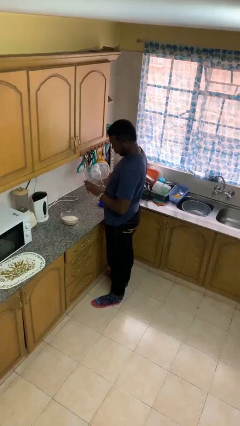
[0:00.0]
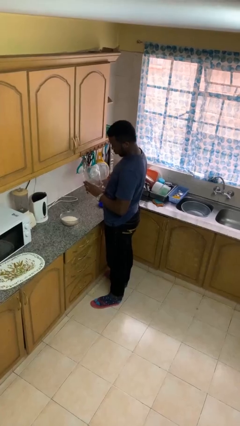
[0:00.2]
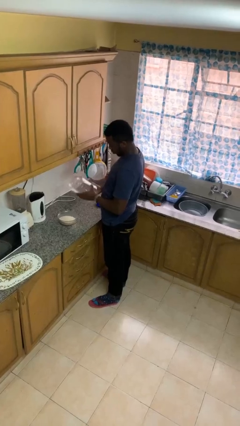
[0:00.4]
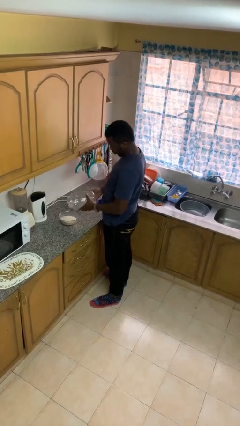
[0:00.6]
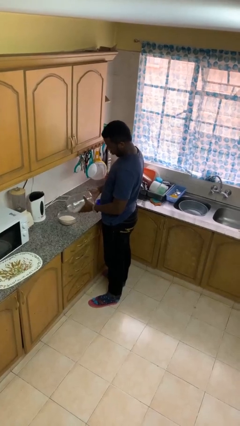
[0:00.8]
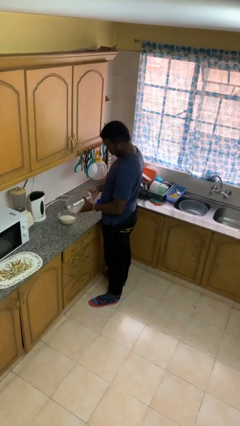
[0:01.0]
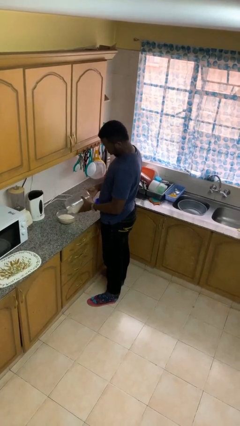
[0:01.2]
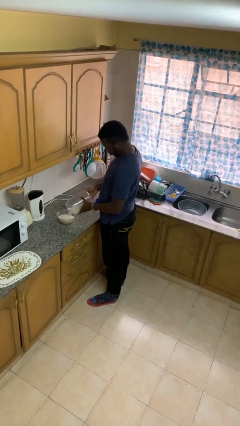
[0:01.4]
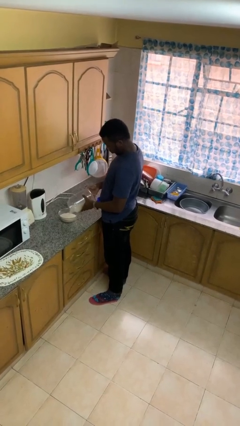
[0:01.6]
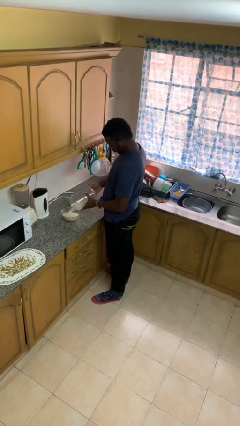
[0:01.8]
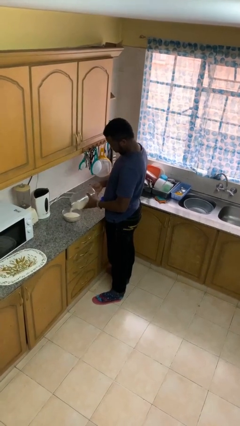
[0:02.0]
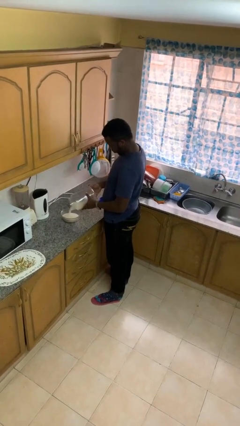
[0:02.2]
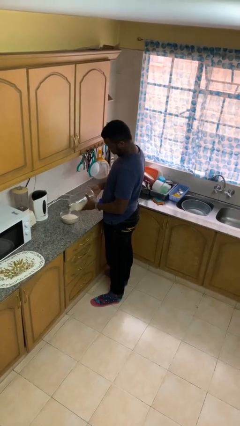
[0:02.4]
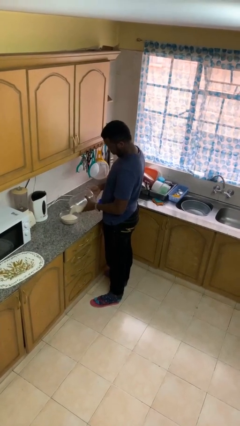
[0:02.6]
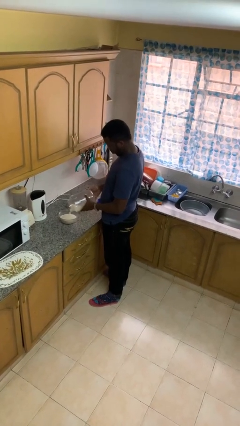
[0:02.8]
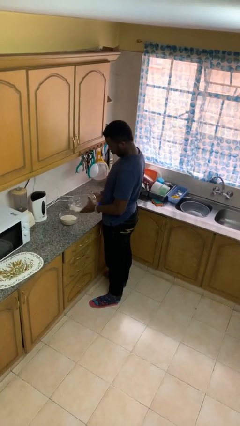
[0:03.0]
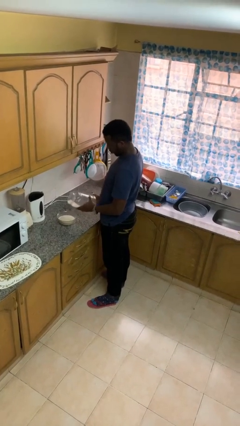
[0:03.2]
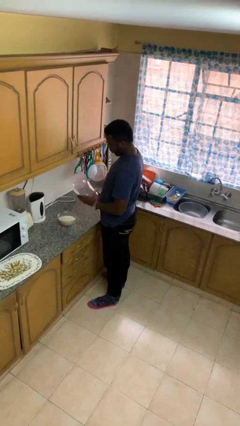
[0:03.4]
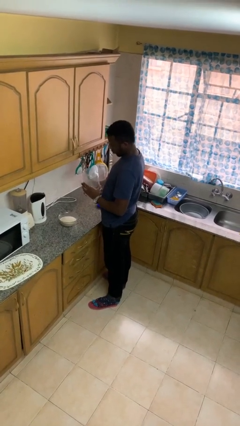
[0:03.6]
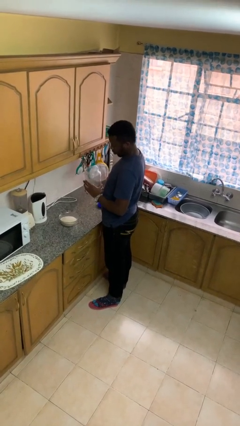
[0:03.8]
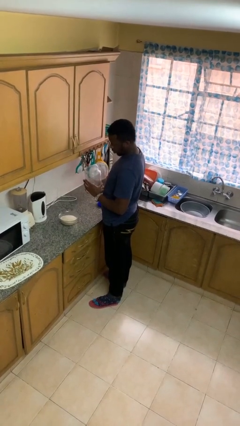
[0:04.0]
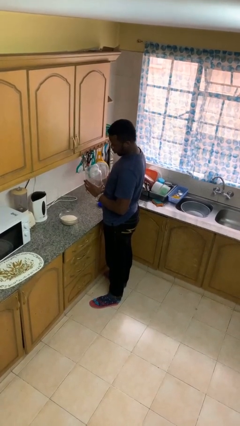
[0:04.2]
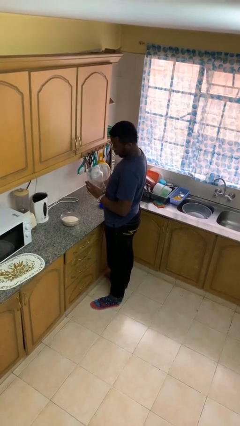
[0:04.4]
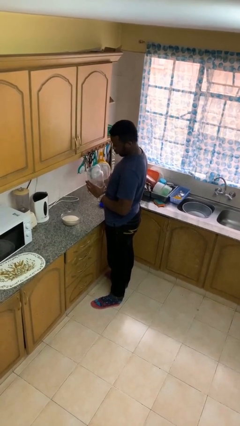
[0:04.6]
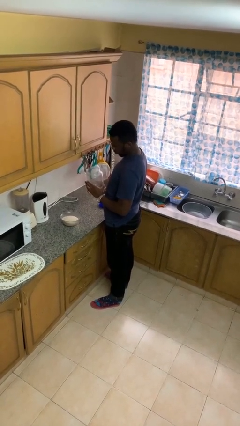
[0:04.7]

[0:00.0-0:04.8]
person pours into bowl

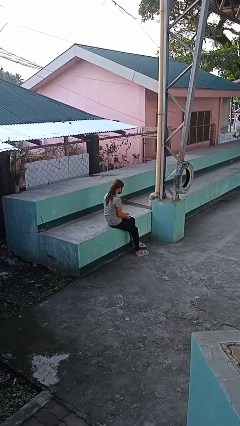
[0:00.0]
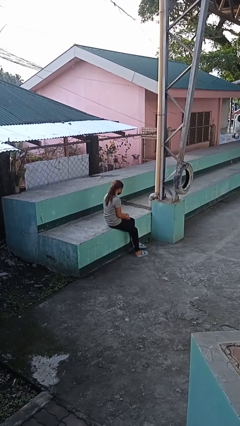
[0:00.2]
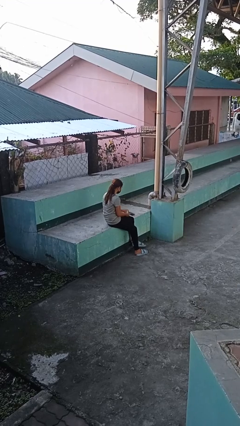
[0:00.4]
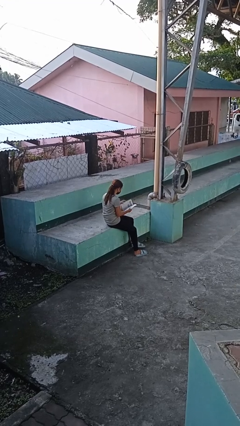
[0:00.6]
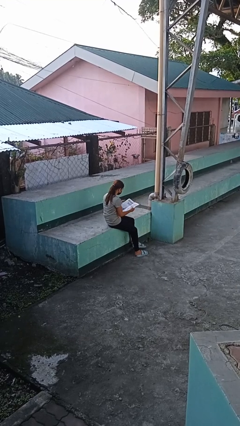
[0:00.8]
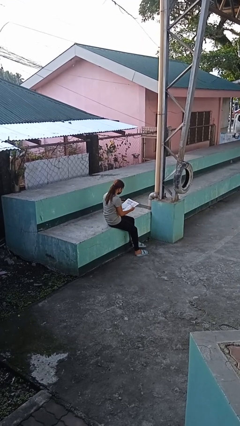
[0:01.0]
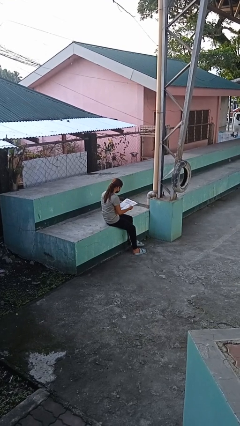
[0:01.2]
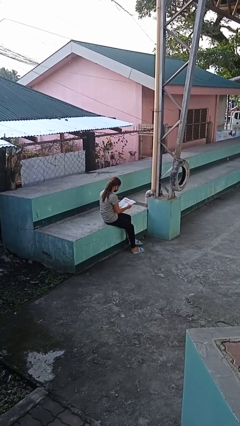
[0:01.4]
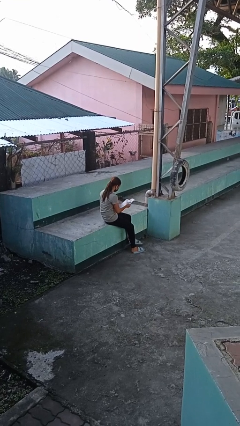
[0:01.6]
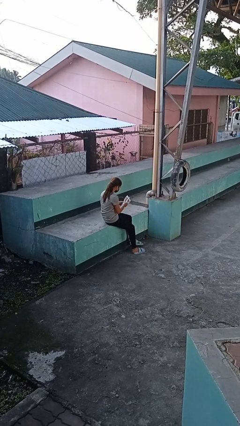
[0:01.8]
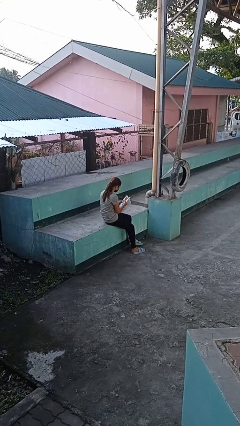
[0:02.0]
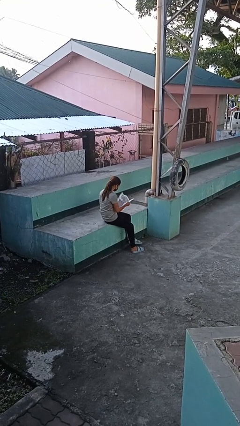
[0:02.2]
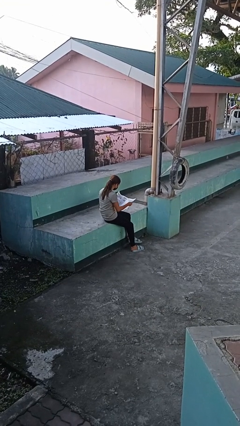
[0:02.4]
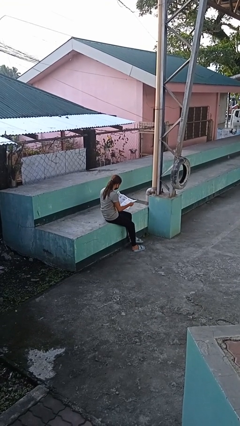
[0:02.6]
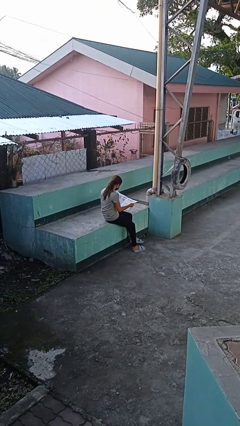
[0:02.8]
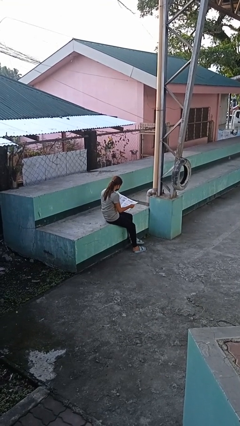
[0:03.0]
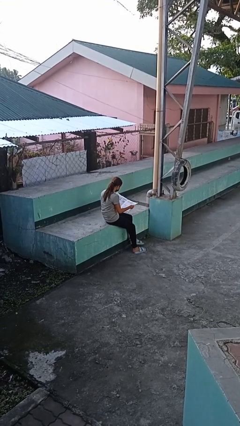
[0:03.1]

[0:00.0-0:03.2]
person reads newspaper

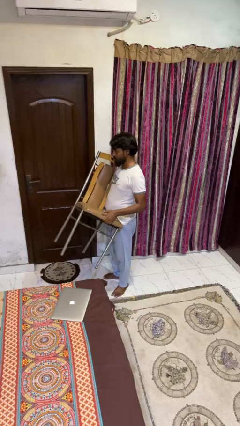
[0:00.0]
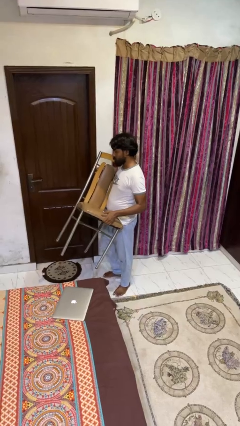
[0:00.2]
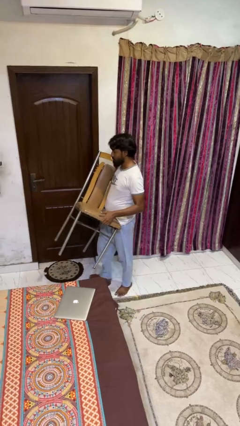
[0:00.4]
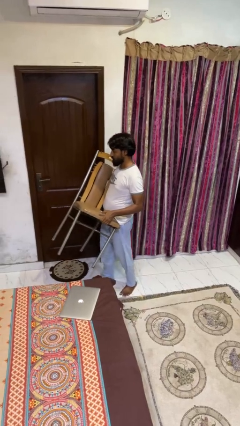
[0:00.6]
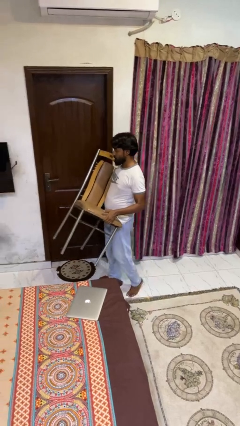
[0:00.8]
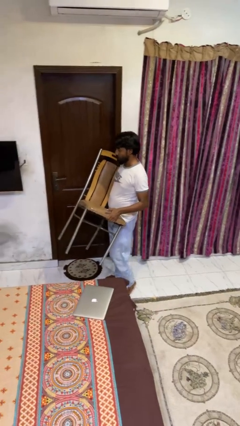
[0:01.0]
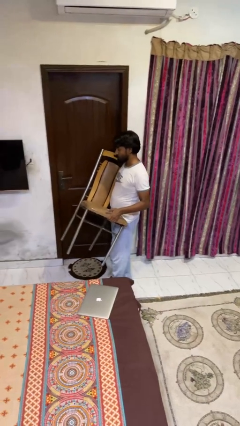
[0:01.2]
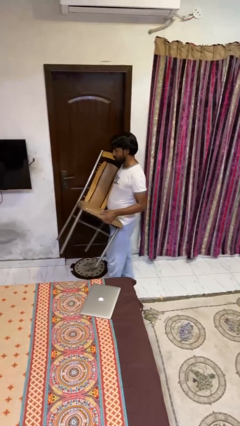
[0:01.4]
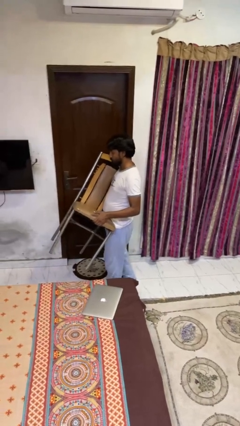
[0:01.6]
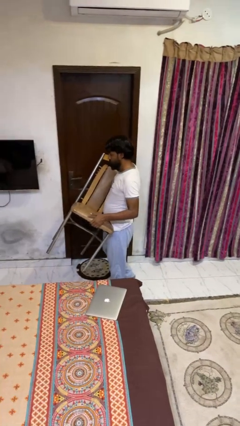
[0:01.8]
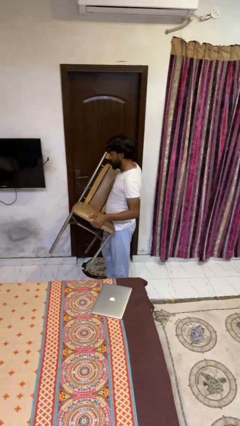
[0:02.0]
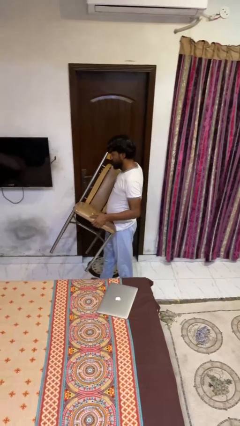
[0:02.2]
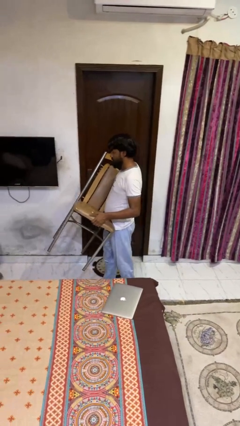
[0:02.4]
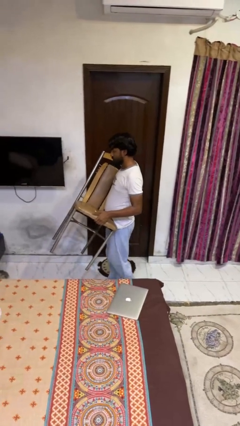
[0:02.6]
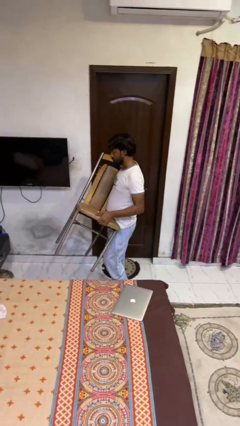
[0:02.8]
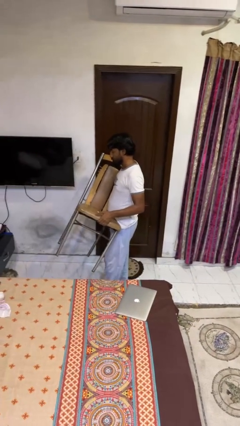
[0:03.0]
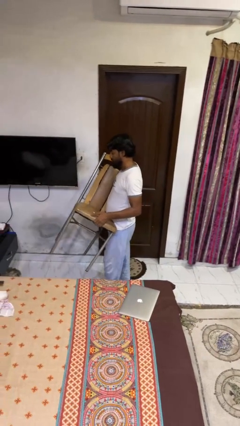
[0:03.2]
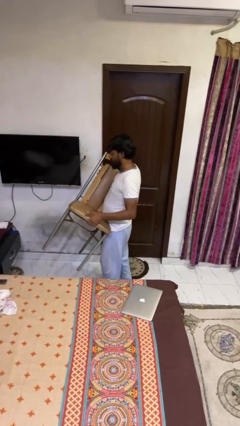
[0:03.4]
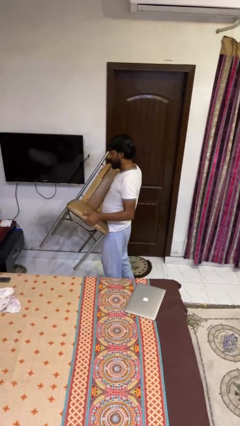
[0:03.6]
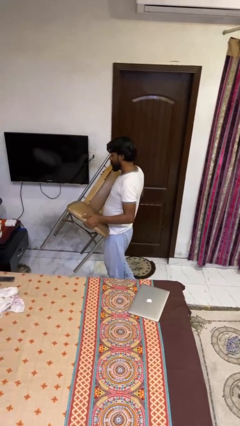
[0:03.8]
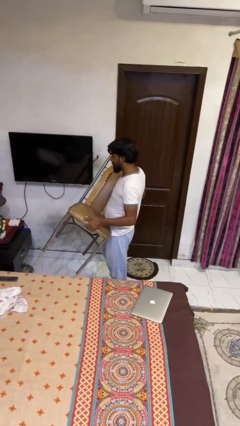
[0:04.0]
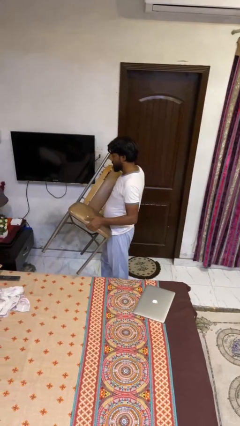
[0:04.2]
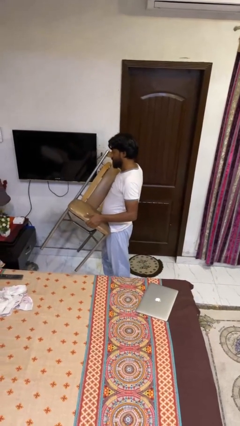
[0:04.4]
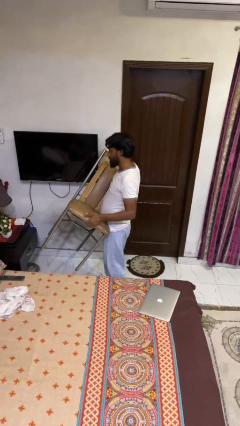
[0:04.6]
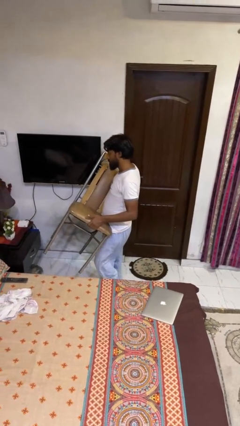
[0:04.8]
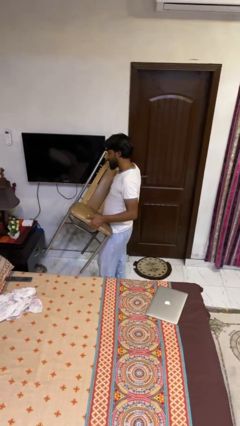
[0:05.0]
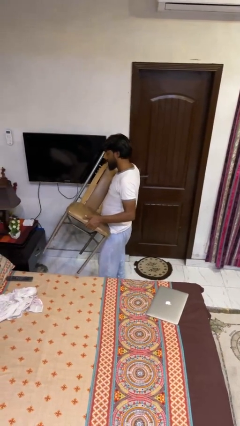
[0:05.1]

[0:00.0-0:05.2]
person carries furniture

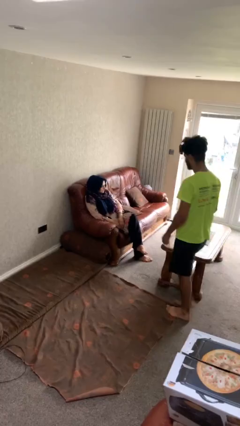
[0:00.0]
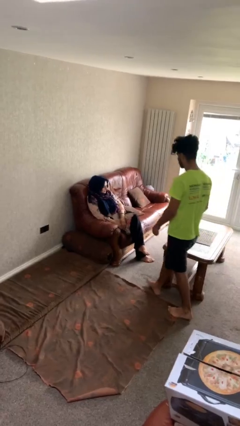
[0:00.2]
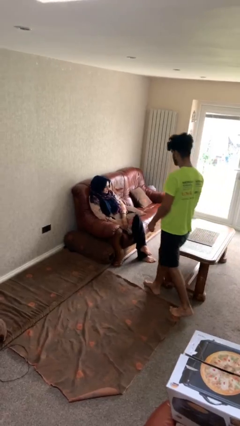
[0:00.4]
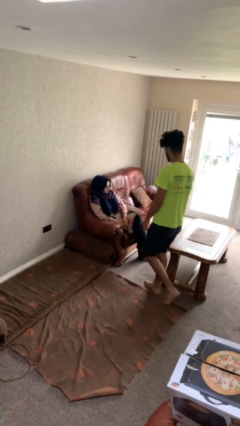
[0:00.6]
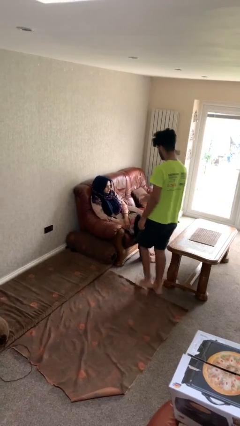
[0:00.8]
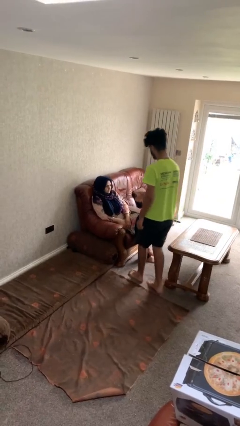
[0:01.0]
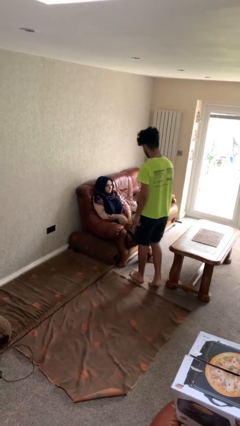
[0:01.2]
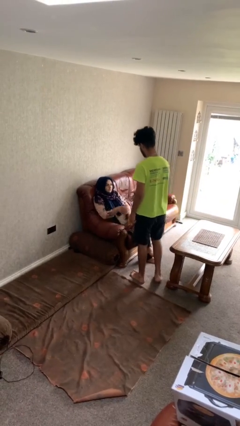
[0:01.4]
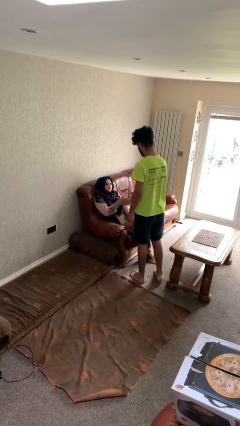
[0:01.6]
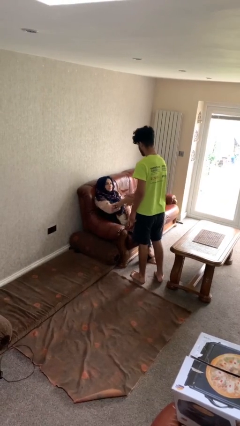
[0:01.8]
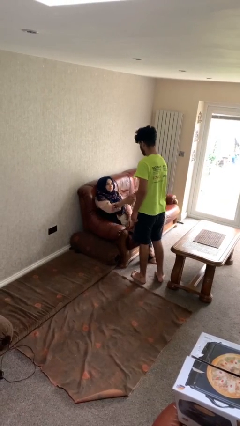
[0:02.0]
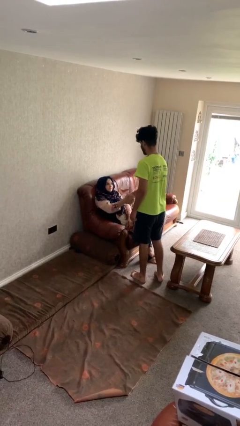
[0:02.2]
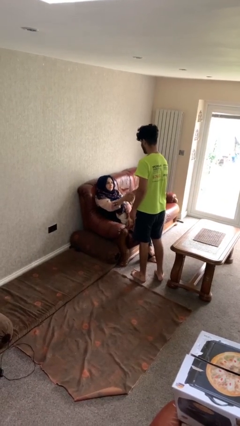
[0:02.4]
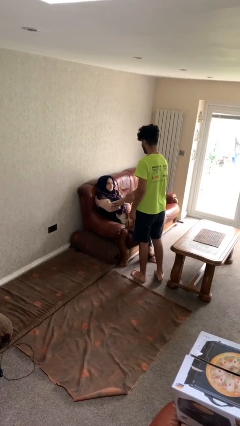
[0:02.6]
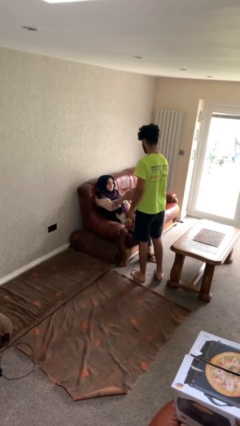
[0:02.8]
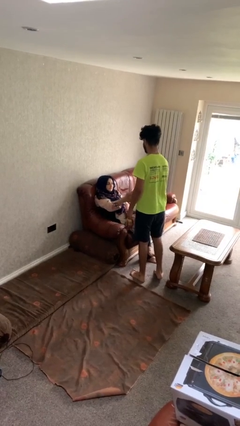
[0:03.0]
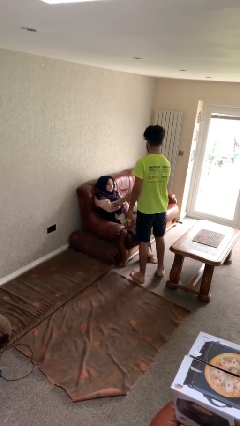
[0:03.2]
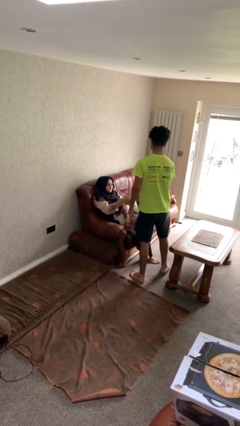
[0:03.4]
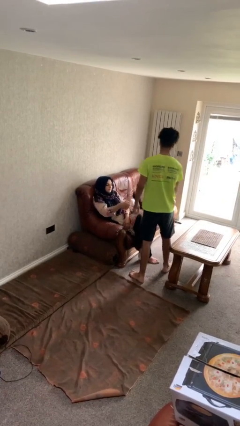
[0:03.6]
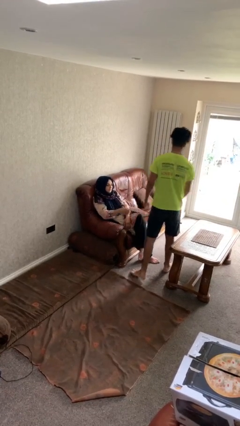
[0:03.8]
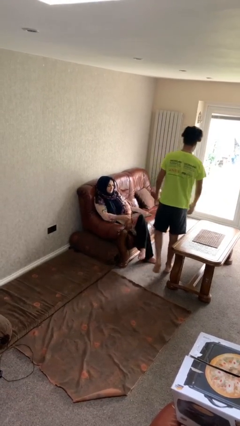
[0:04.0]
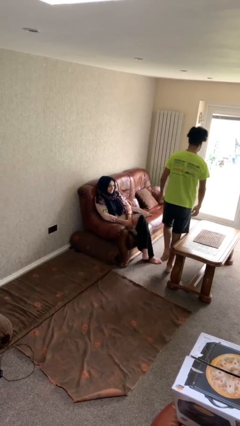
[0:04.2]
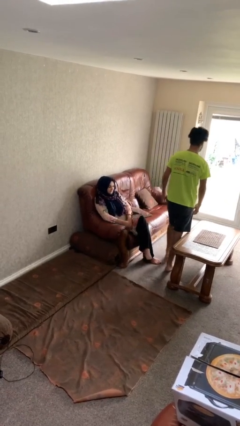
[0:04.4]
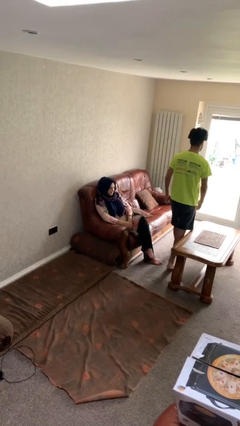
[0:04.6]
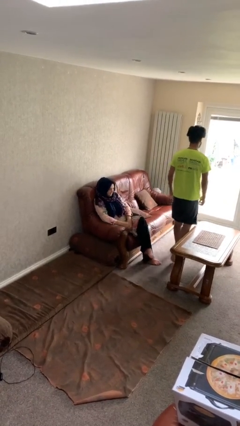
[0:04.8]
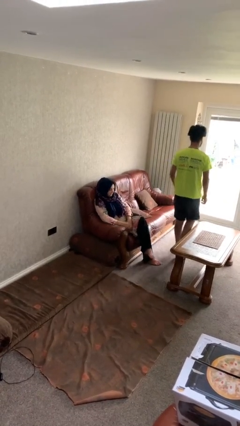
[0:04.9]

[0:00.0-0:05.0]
person shakes hand

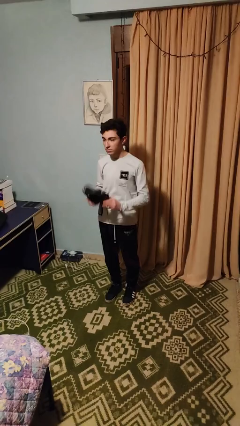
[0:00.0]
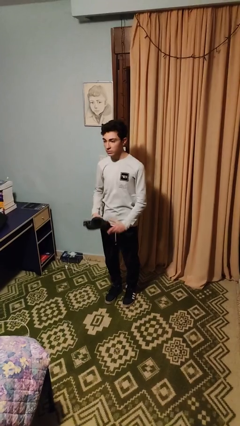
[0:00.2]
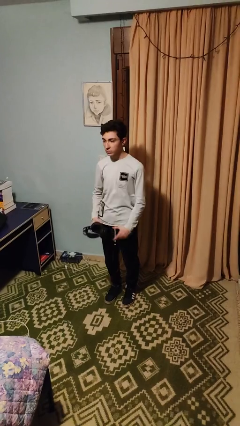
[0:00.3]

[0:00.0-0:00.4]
person takes off headphones
